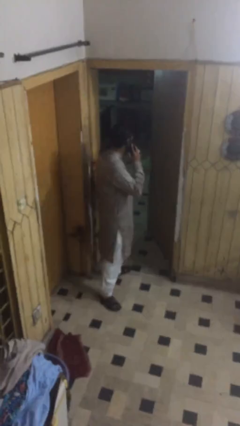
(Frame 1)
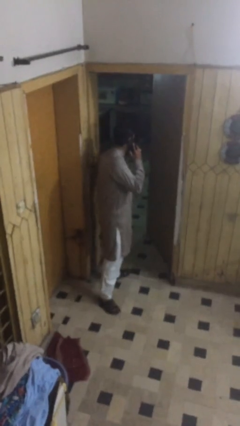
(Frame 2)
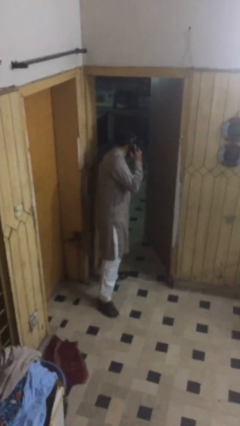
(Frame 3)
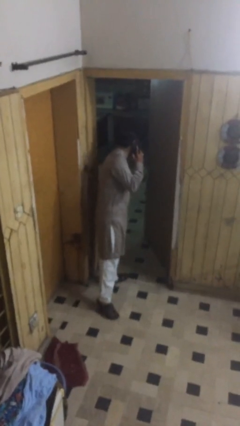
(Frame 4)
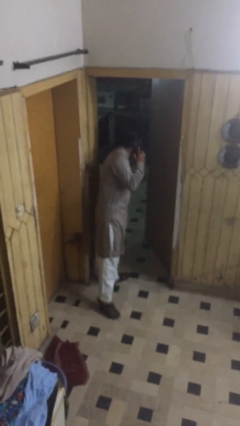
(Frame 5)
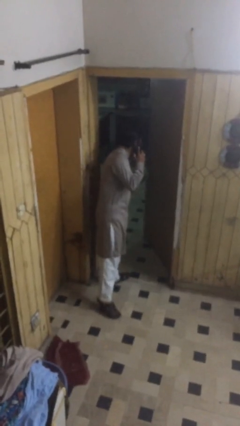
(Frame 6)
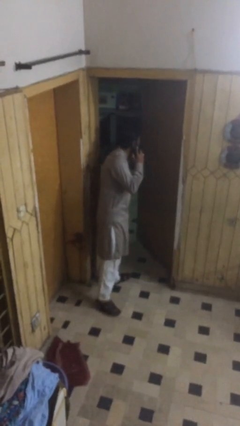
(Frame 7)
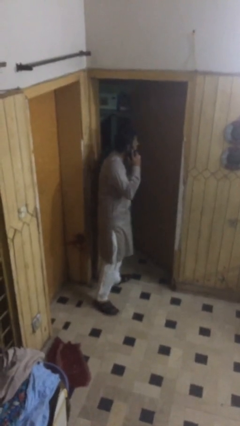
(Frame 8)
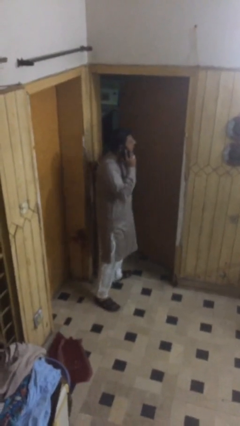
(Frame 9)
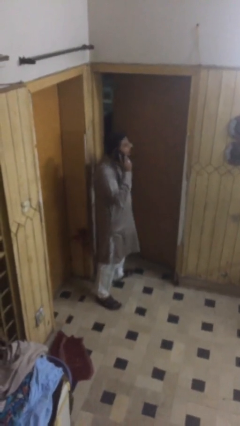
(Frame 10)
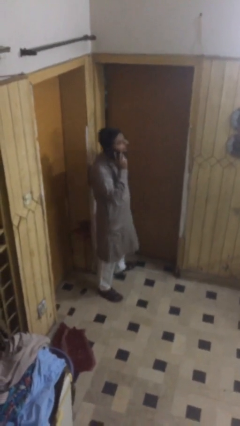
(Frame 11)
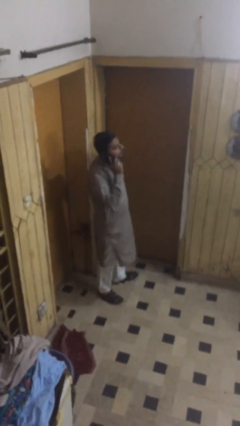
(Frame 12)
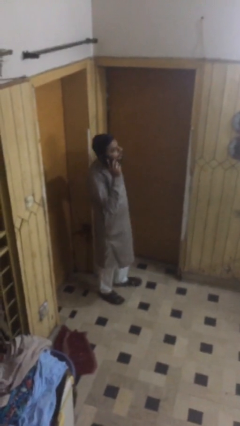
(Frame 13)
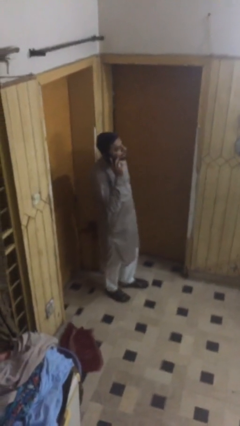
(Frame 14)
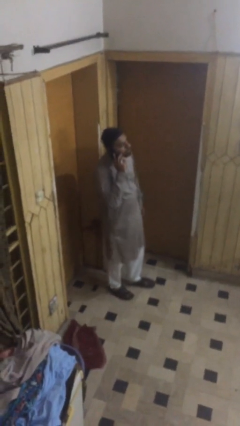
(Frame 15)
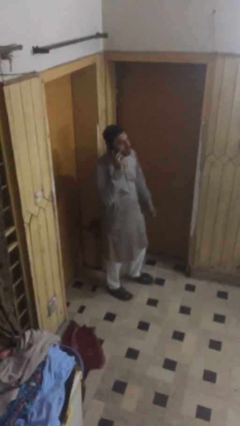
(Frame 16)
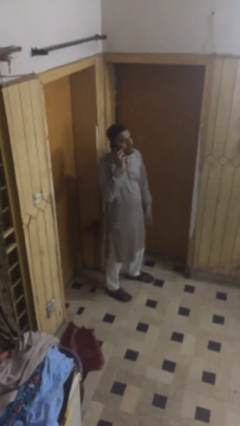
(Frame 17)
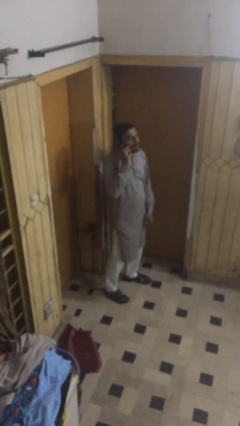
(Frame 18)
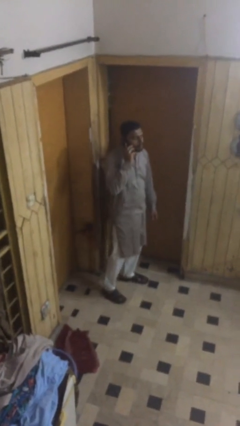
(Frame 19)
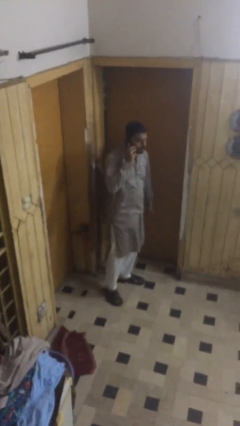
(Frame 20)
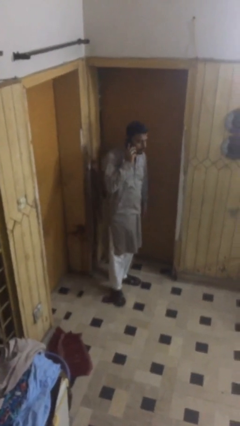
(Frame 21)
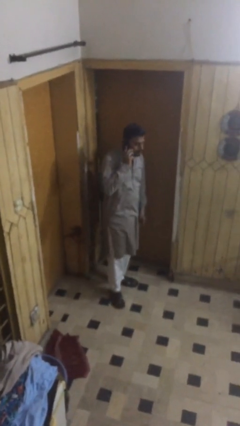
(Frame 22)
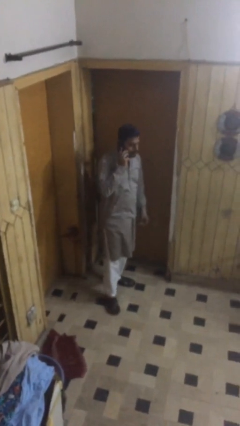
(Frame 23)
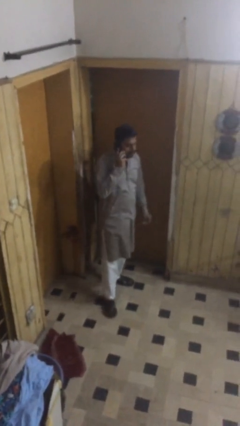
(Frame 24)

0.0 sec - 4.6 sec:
person closes facility door

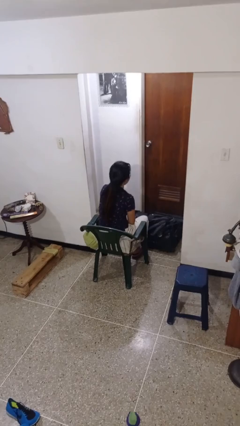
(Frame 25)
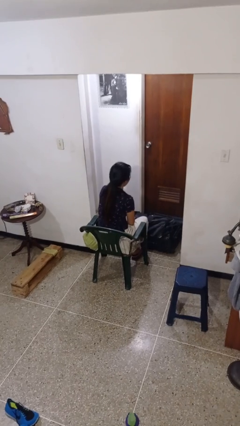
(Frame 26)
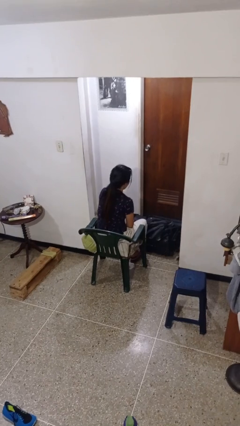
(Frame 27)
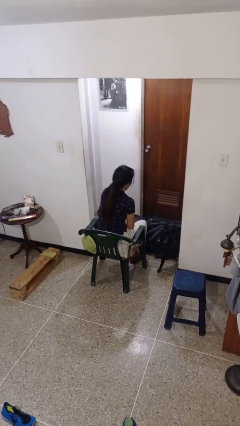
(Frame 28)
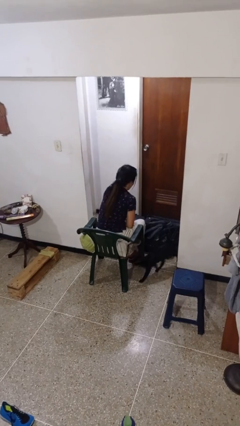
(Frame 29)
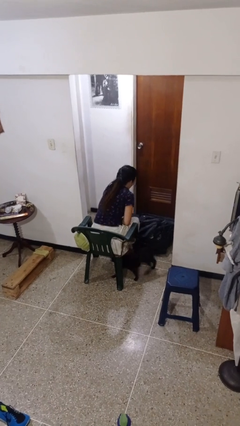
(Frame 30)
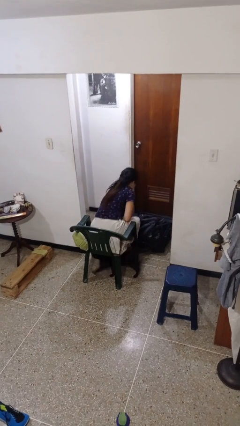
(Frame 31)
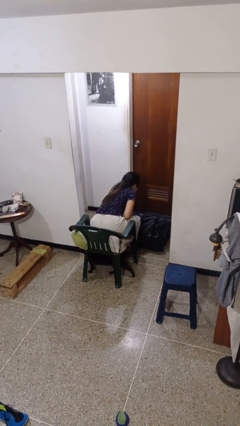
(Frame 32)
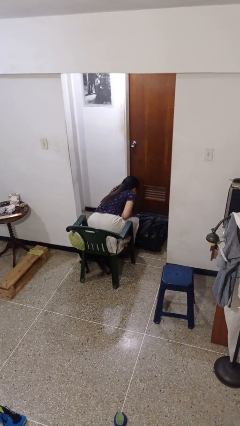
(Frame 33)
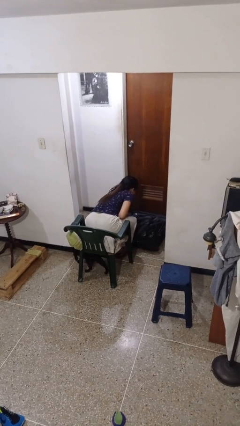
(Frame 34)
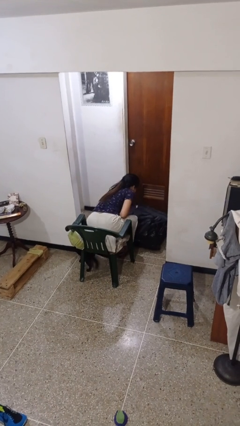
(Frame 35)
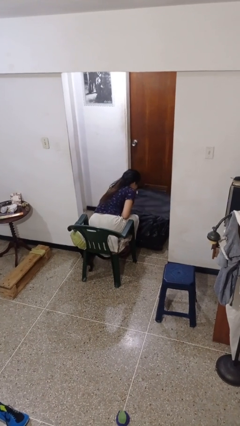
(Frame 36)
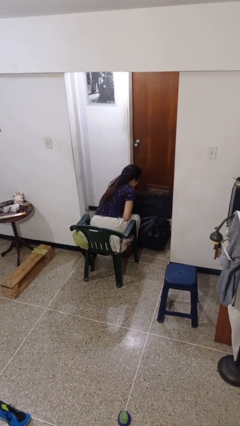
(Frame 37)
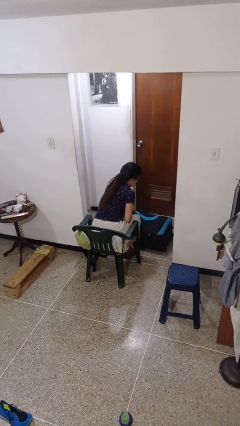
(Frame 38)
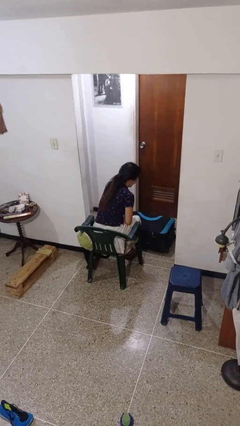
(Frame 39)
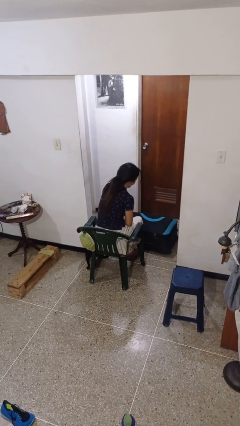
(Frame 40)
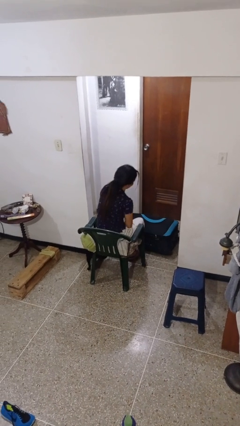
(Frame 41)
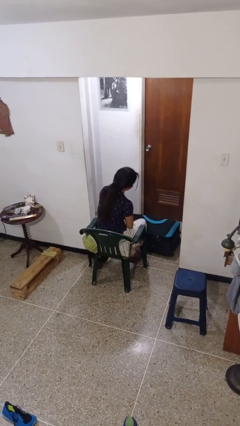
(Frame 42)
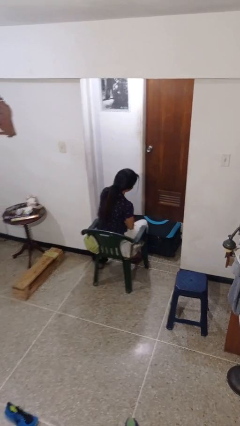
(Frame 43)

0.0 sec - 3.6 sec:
person closes suitcase

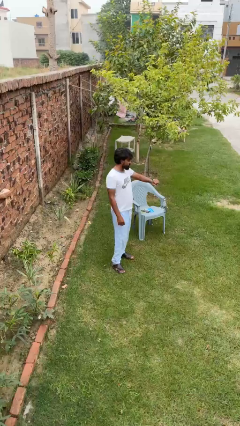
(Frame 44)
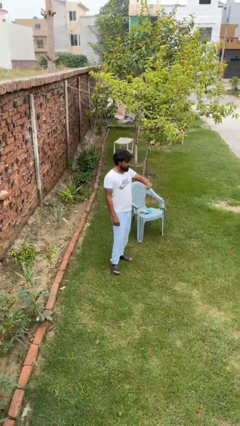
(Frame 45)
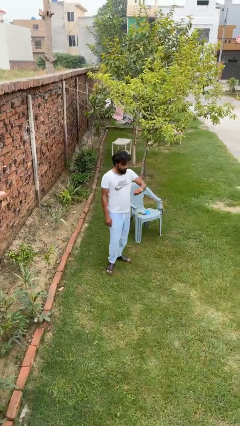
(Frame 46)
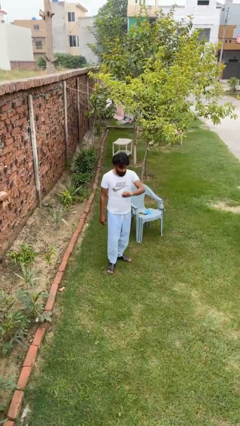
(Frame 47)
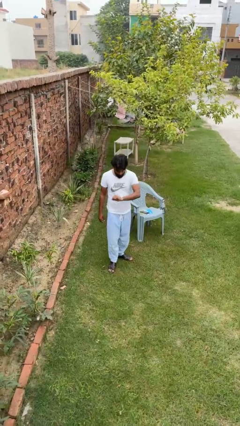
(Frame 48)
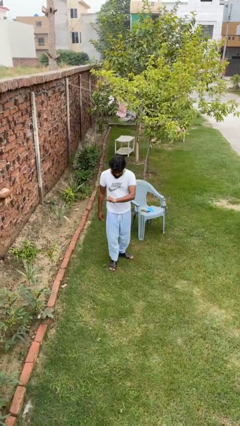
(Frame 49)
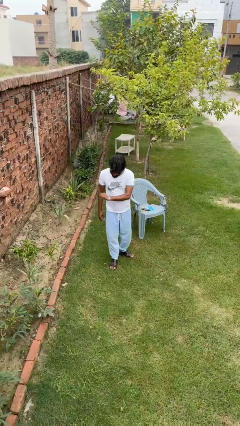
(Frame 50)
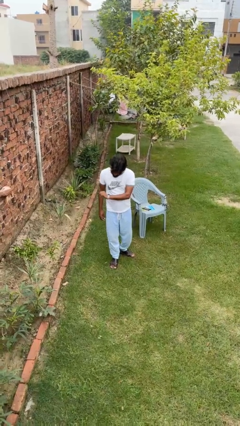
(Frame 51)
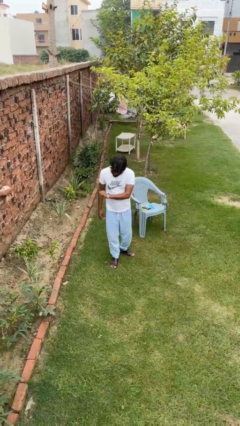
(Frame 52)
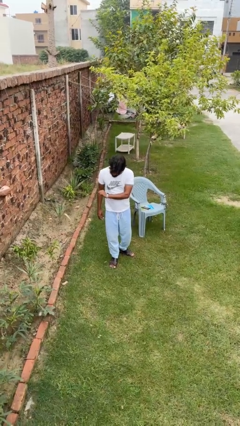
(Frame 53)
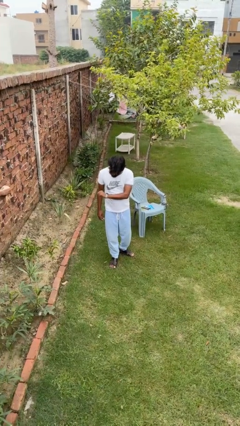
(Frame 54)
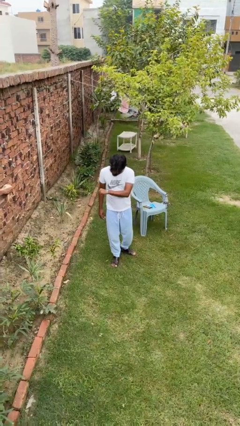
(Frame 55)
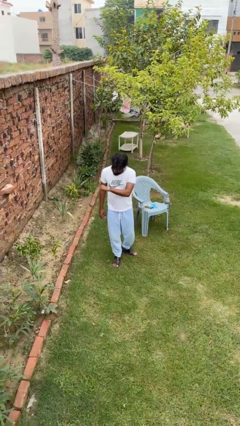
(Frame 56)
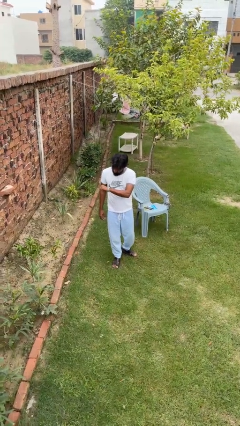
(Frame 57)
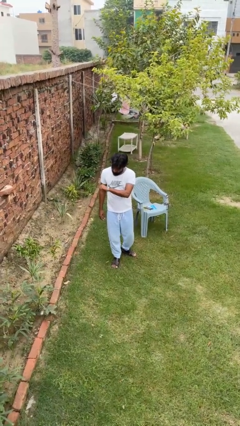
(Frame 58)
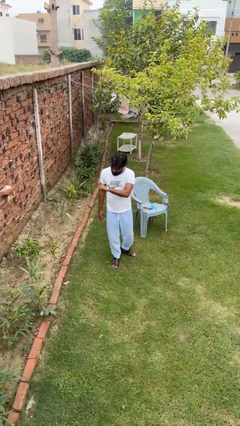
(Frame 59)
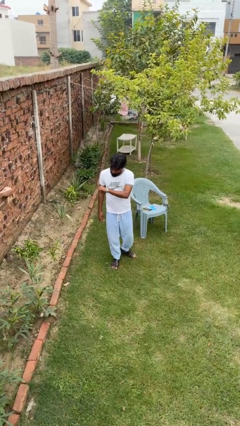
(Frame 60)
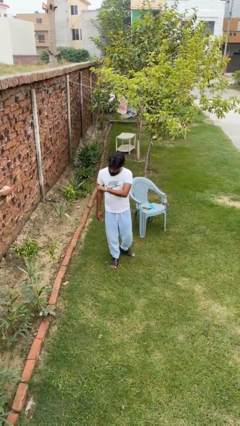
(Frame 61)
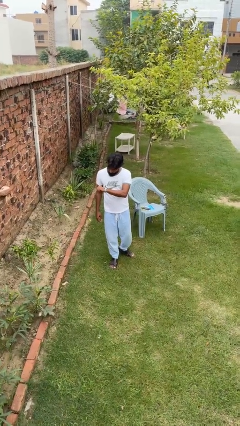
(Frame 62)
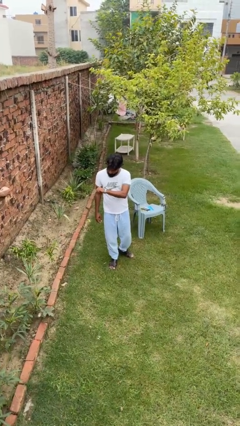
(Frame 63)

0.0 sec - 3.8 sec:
person looks at wristwatch

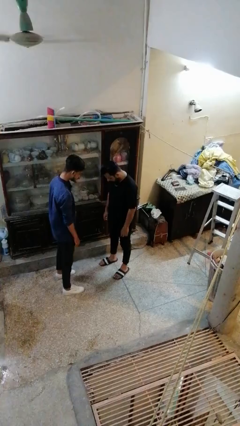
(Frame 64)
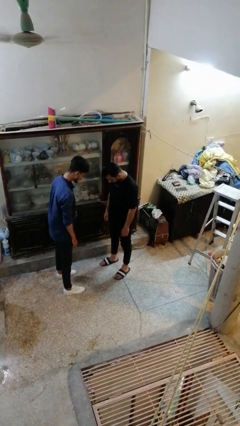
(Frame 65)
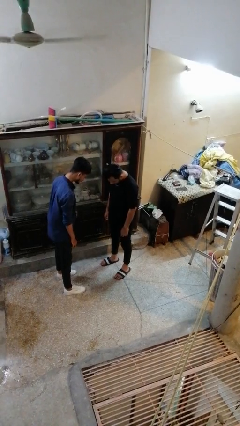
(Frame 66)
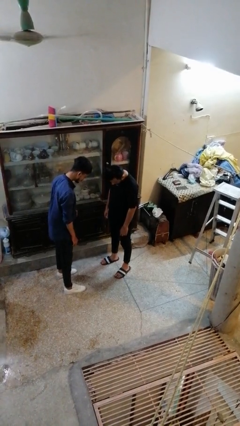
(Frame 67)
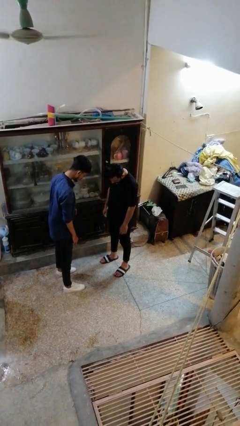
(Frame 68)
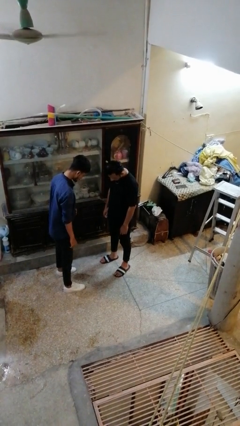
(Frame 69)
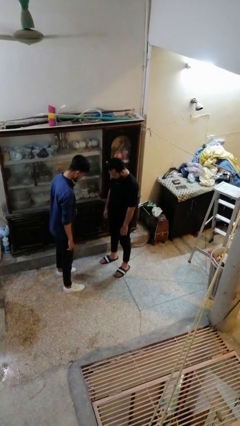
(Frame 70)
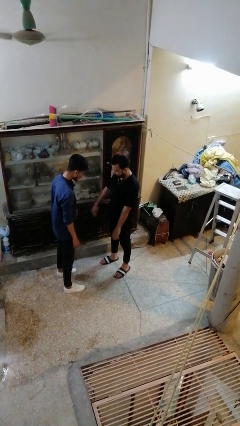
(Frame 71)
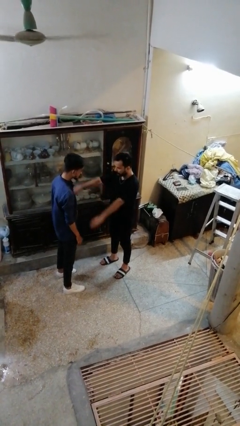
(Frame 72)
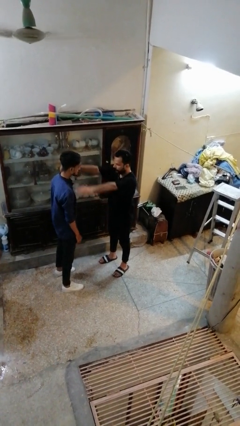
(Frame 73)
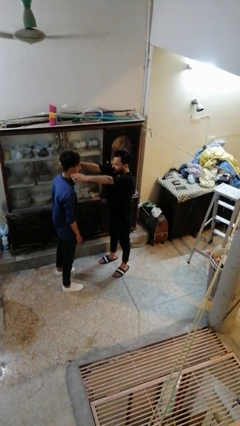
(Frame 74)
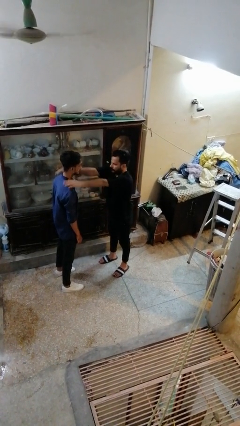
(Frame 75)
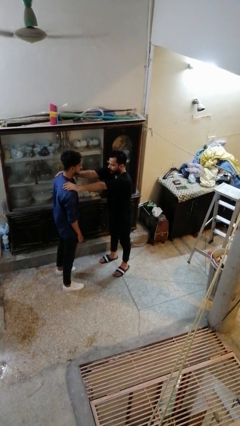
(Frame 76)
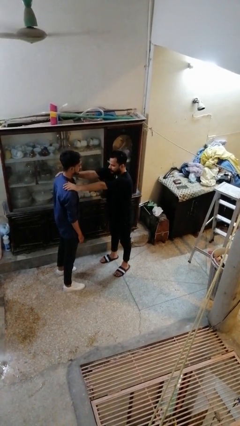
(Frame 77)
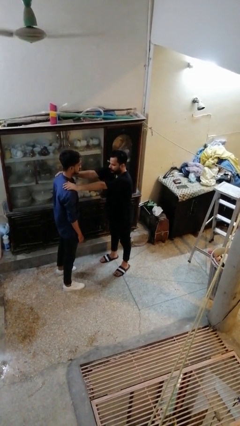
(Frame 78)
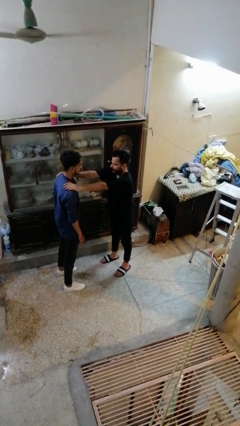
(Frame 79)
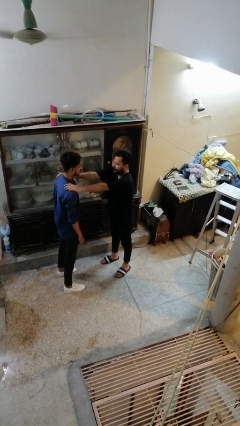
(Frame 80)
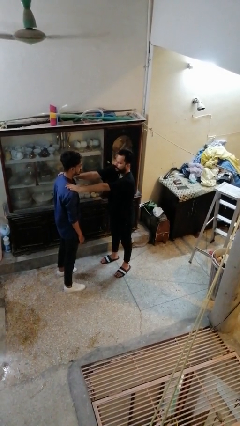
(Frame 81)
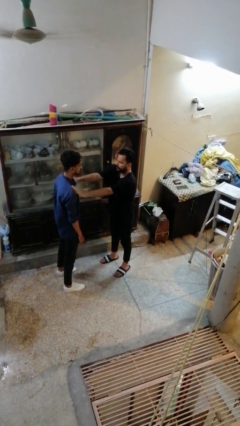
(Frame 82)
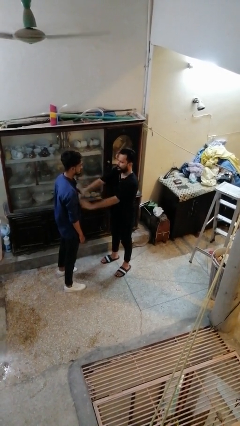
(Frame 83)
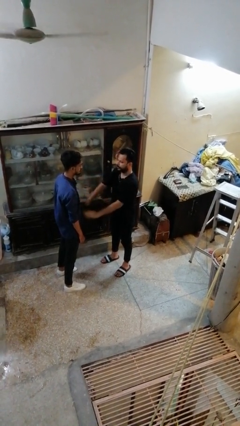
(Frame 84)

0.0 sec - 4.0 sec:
person pounds shoulders of person

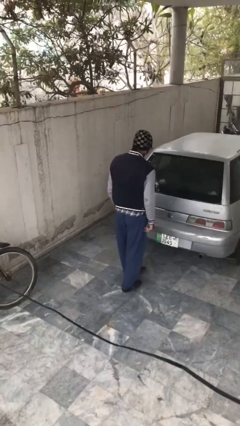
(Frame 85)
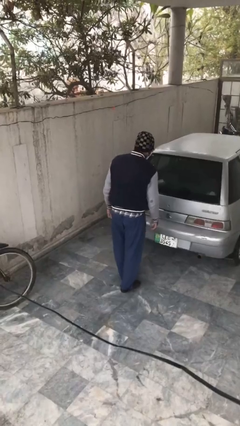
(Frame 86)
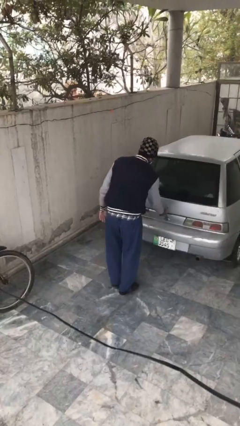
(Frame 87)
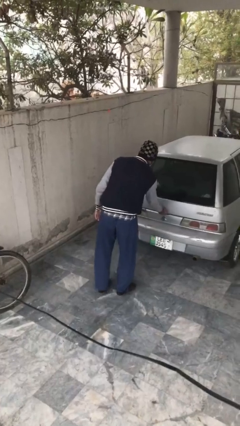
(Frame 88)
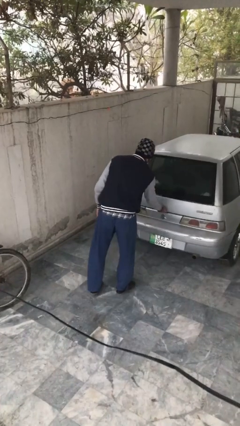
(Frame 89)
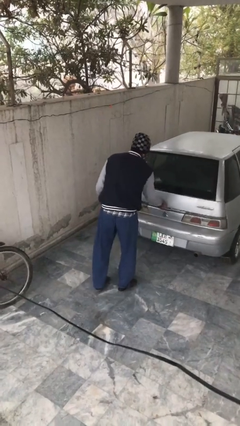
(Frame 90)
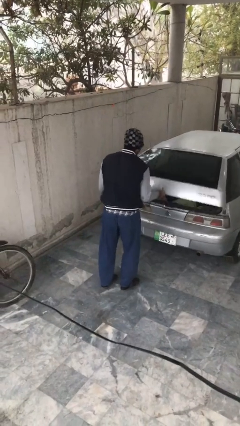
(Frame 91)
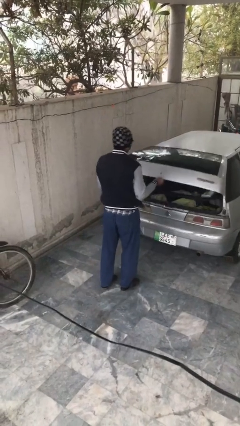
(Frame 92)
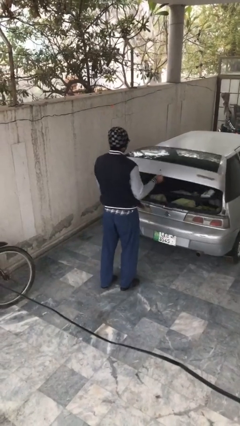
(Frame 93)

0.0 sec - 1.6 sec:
person opens car trunk
